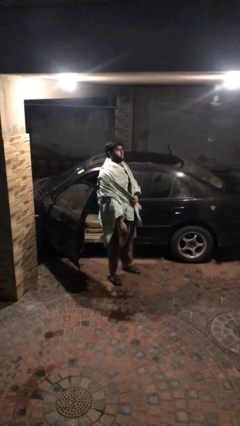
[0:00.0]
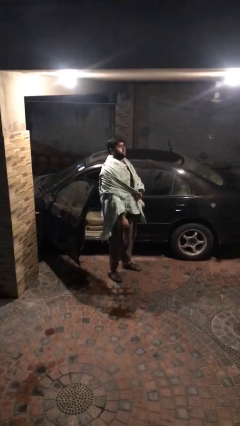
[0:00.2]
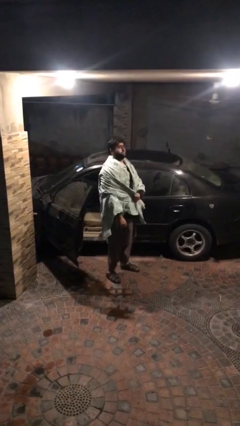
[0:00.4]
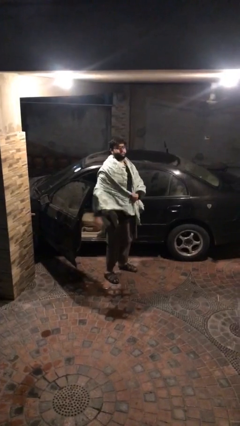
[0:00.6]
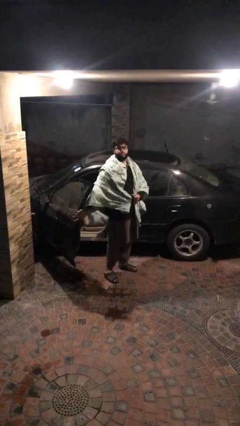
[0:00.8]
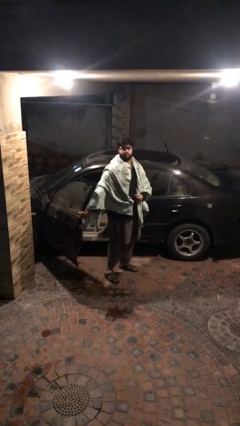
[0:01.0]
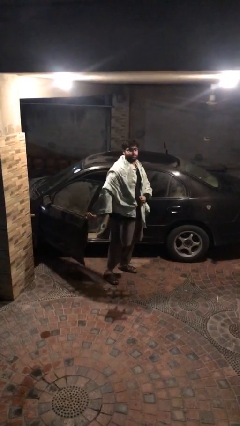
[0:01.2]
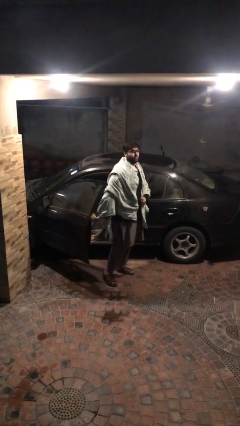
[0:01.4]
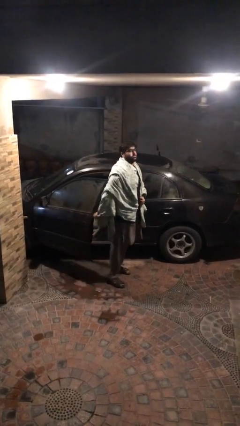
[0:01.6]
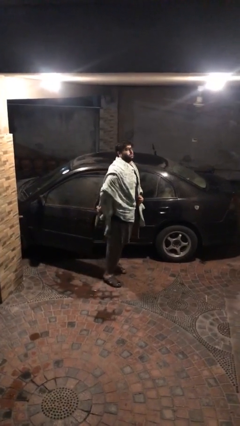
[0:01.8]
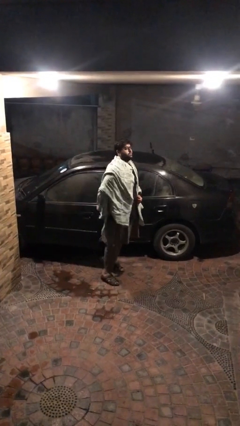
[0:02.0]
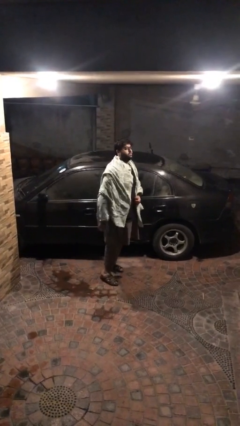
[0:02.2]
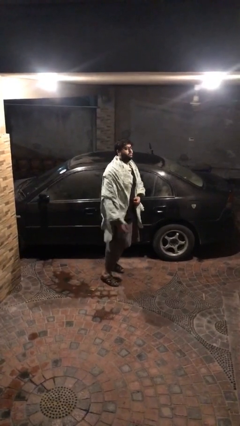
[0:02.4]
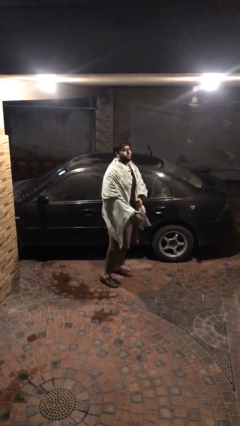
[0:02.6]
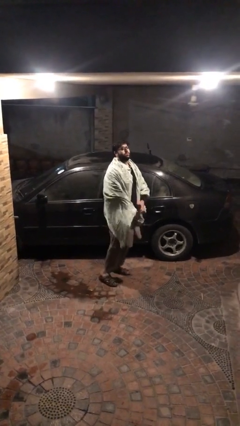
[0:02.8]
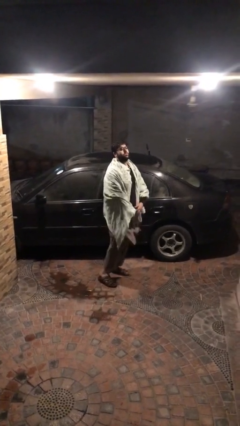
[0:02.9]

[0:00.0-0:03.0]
person closes car door

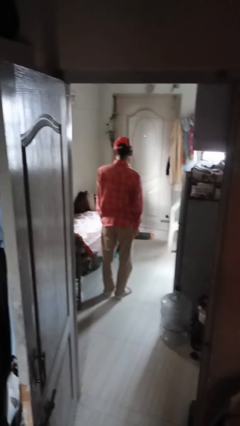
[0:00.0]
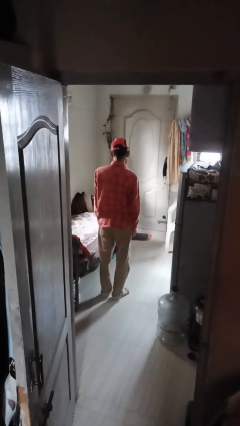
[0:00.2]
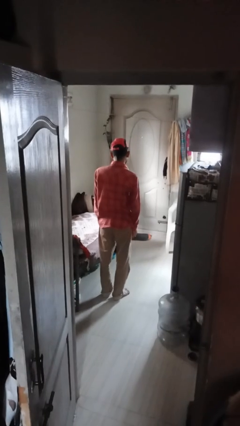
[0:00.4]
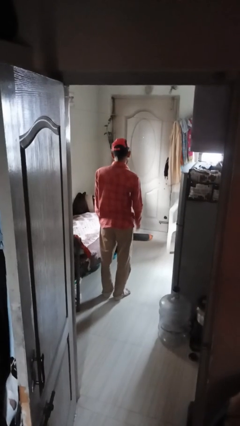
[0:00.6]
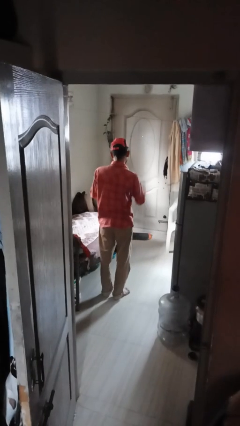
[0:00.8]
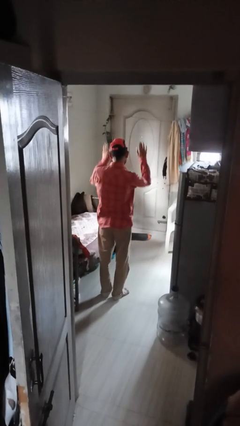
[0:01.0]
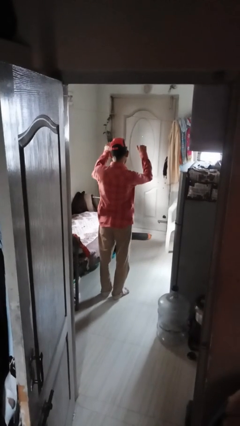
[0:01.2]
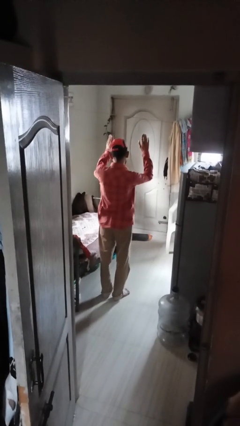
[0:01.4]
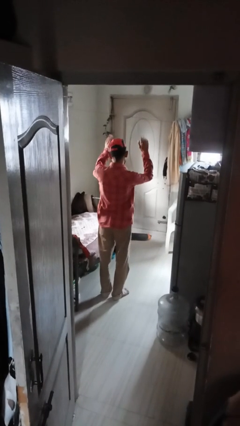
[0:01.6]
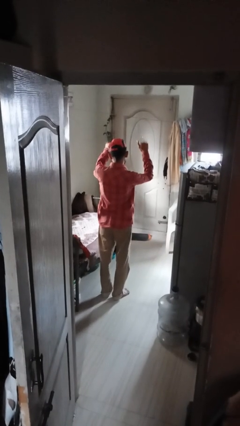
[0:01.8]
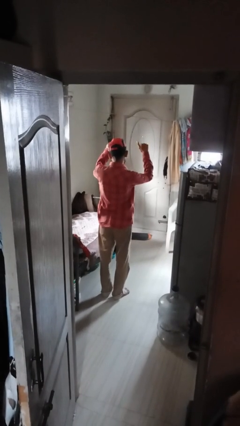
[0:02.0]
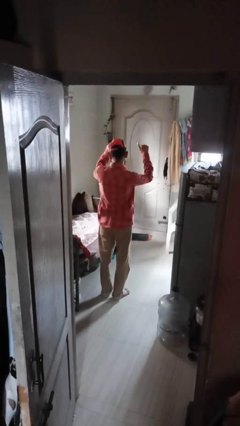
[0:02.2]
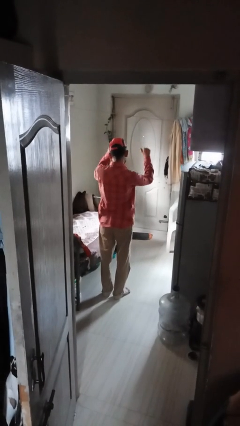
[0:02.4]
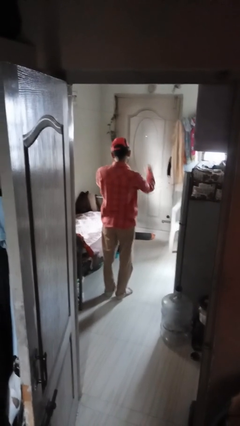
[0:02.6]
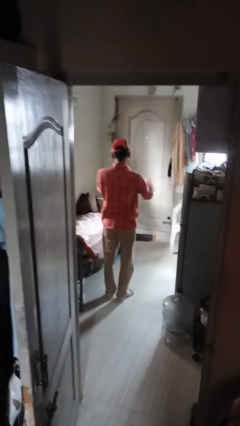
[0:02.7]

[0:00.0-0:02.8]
person gestures come here

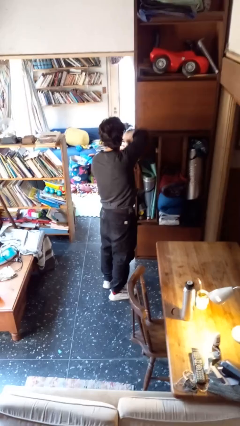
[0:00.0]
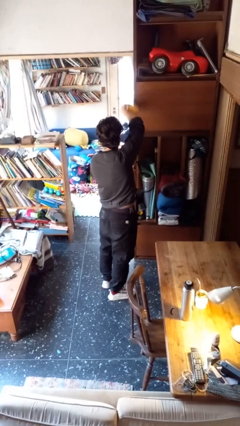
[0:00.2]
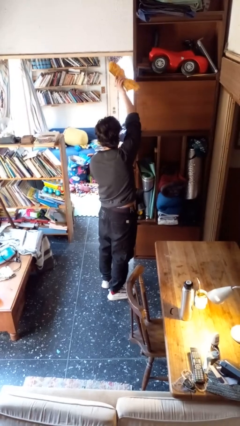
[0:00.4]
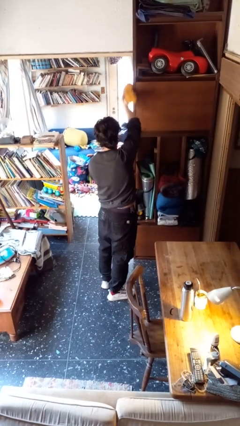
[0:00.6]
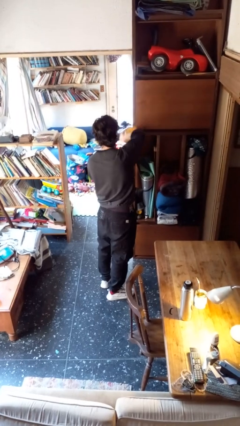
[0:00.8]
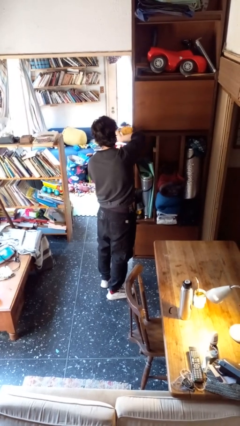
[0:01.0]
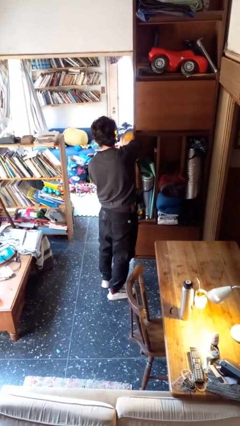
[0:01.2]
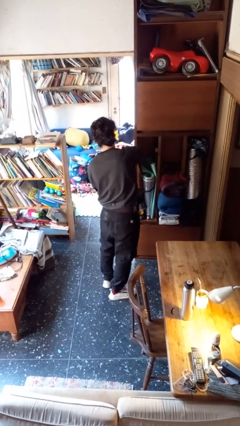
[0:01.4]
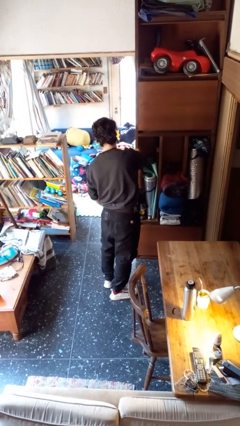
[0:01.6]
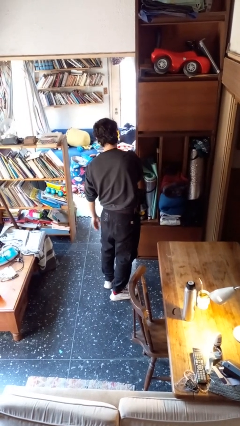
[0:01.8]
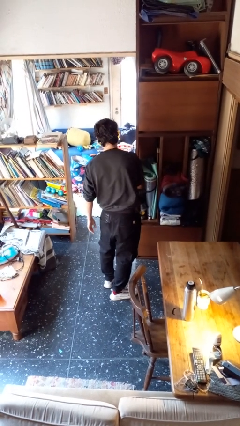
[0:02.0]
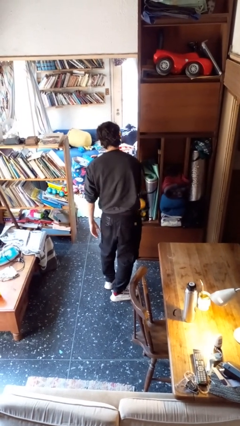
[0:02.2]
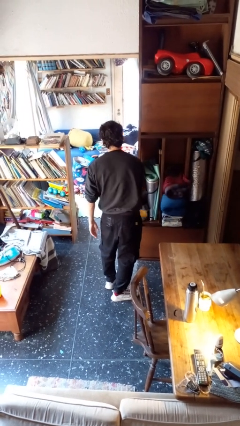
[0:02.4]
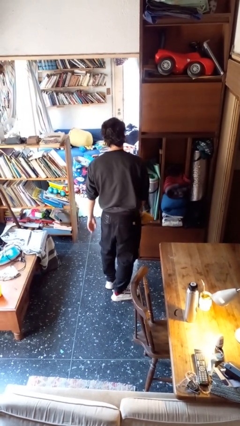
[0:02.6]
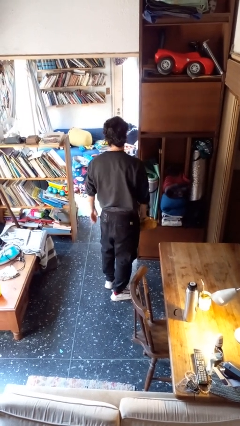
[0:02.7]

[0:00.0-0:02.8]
person dusts furniture

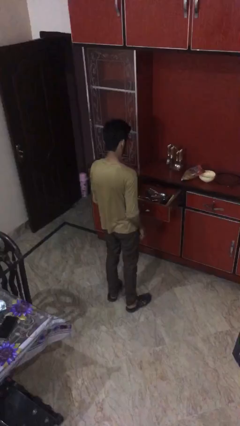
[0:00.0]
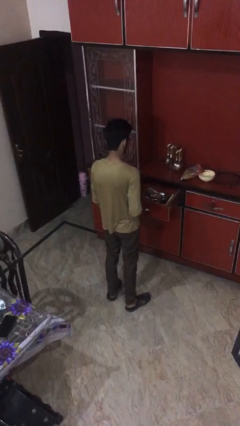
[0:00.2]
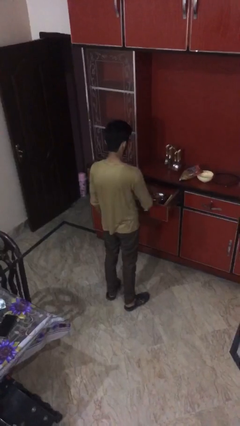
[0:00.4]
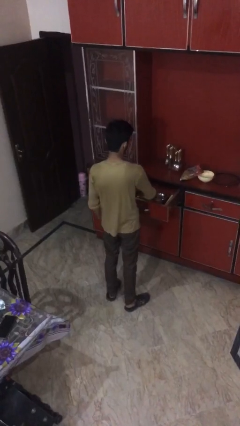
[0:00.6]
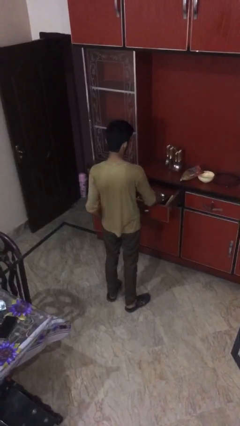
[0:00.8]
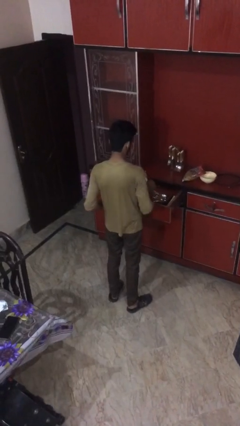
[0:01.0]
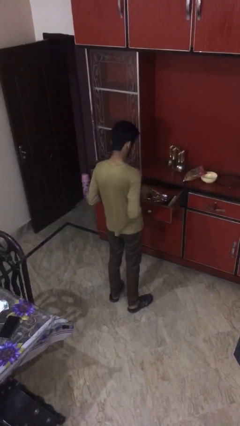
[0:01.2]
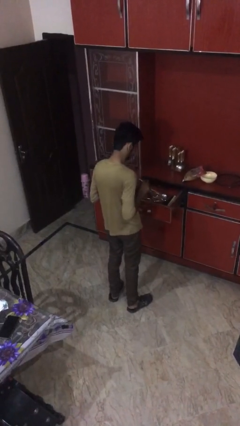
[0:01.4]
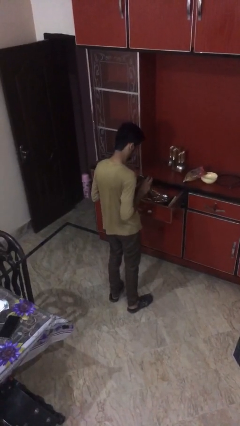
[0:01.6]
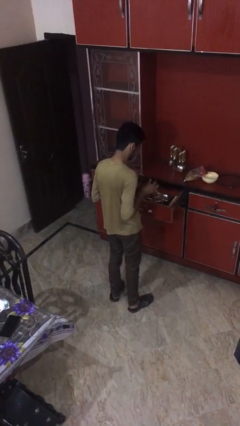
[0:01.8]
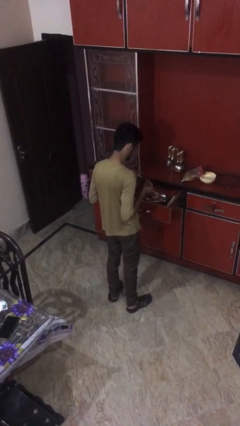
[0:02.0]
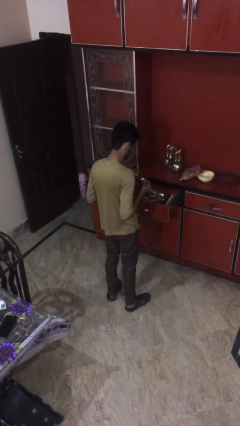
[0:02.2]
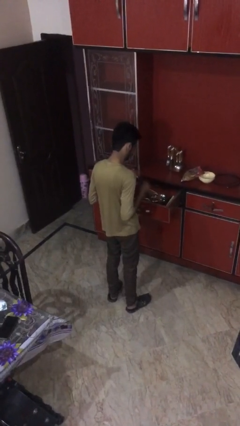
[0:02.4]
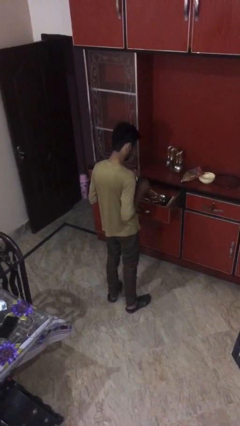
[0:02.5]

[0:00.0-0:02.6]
person takes object from kitchen drawer

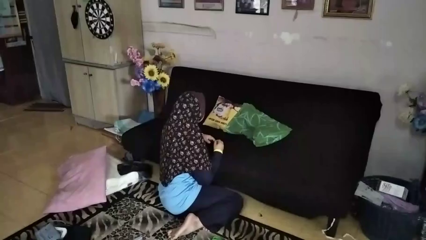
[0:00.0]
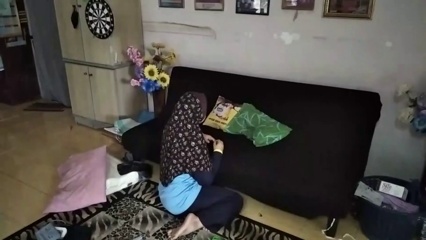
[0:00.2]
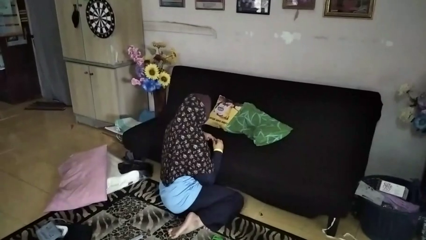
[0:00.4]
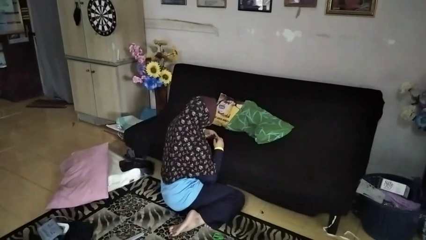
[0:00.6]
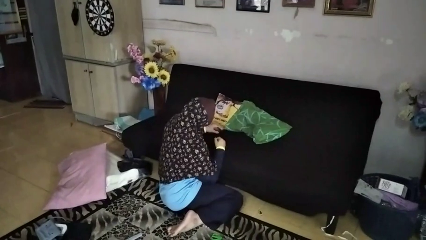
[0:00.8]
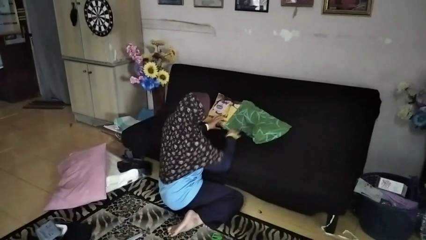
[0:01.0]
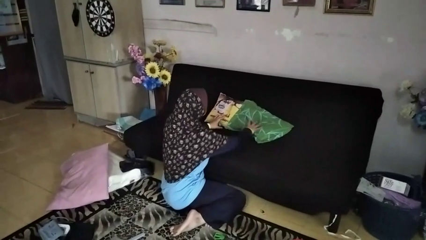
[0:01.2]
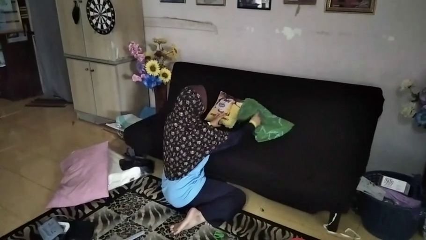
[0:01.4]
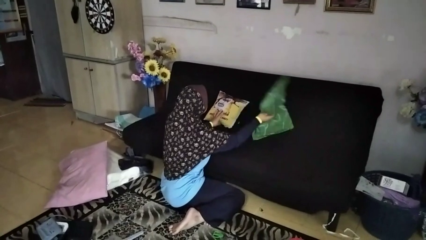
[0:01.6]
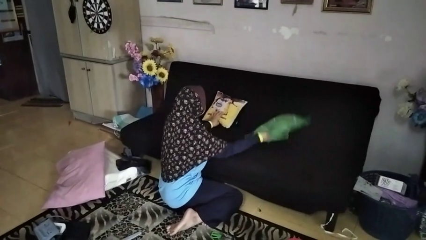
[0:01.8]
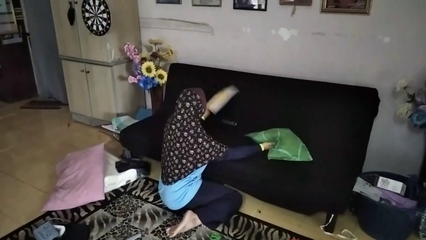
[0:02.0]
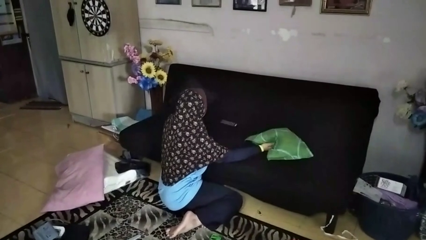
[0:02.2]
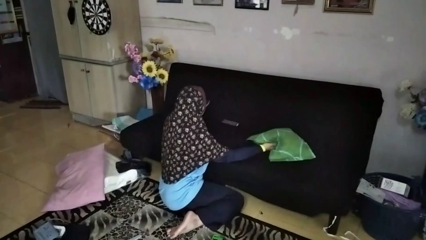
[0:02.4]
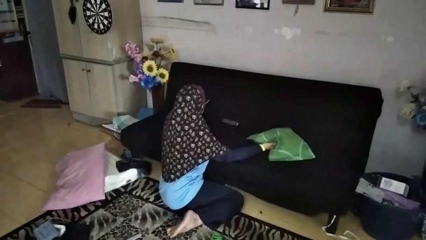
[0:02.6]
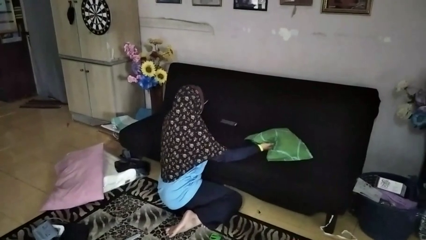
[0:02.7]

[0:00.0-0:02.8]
person searches in couch

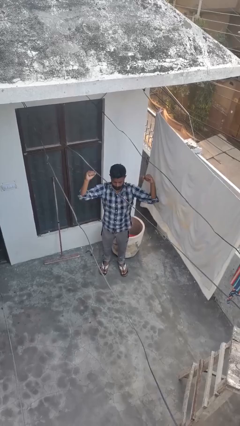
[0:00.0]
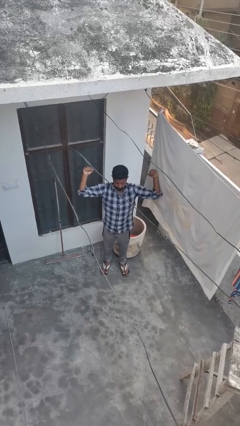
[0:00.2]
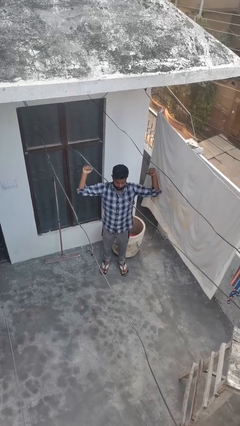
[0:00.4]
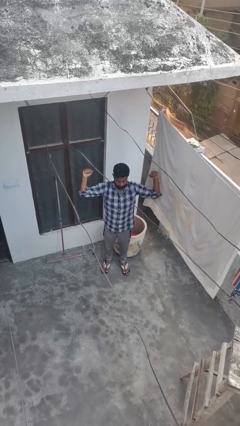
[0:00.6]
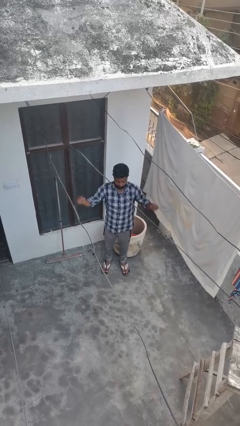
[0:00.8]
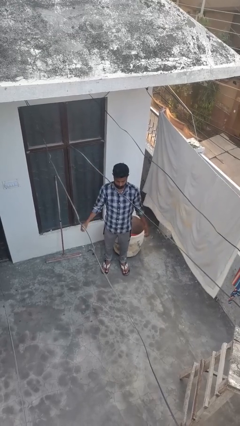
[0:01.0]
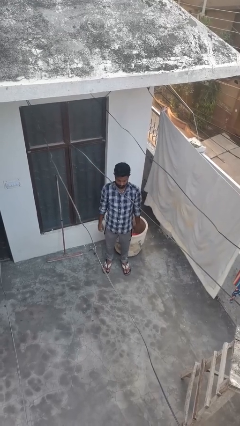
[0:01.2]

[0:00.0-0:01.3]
person gestures zoom out

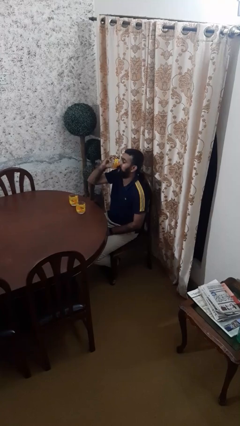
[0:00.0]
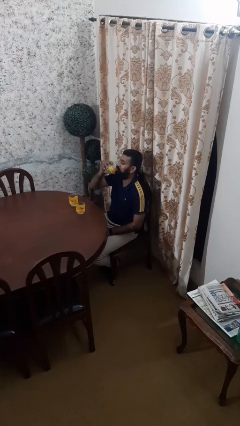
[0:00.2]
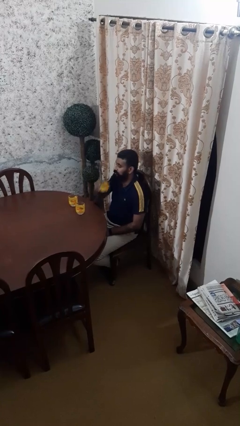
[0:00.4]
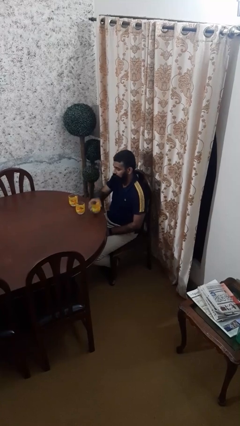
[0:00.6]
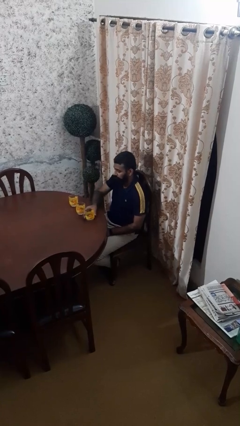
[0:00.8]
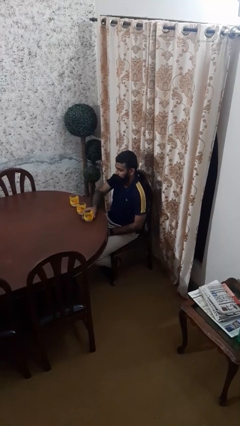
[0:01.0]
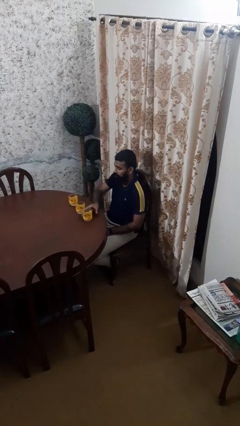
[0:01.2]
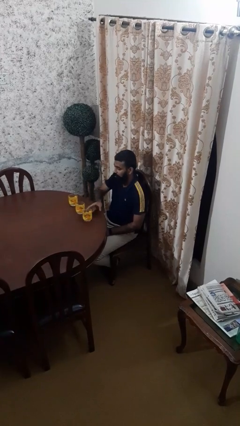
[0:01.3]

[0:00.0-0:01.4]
person puts down object on table

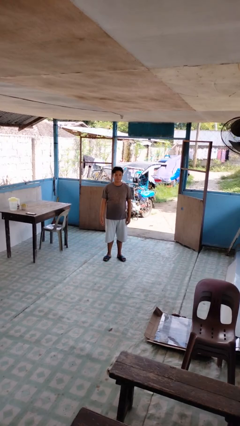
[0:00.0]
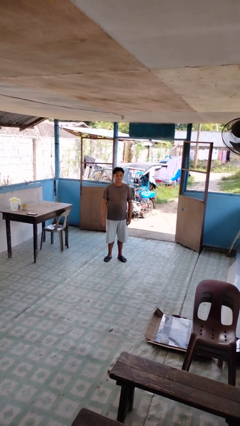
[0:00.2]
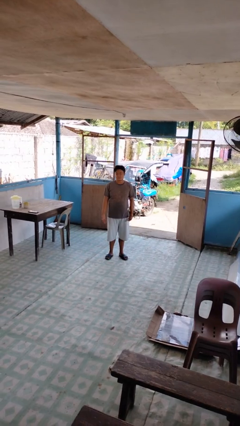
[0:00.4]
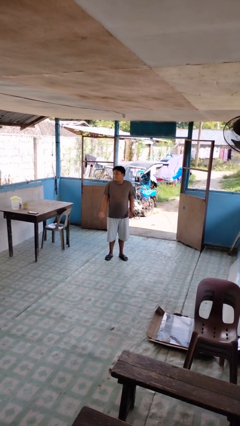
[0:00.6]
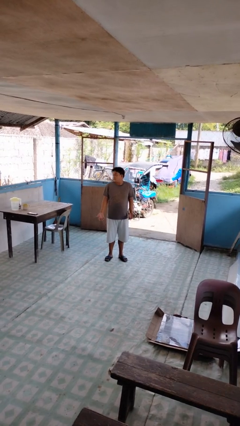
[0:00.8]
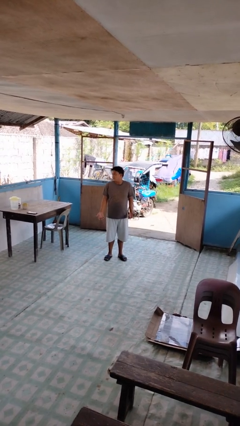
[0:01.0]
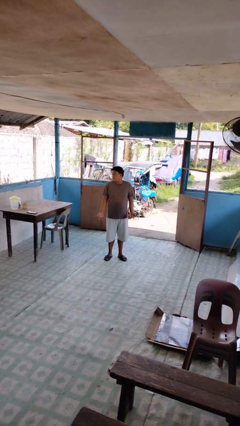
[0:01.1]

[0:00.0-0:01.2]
person shrugs
